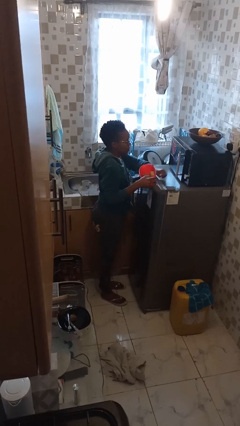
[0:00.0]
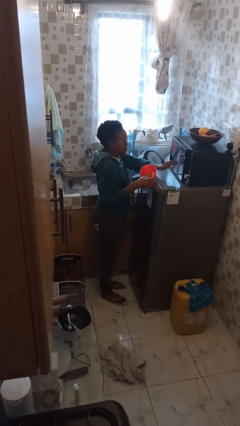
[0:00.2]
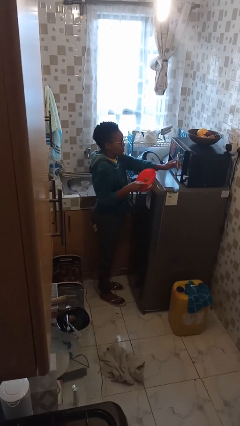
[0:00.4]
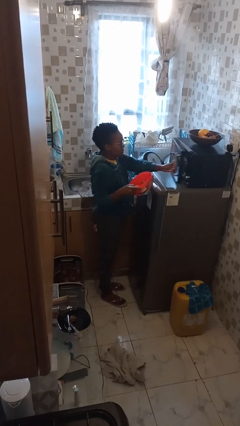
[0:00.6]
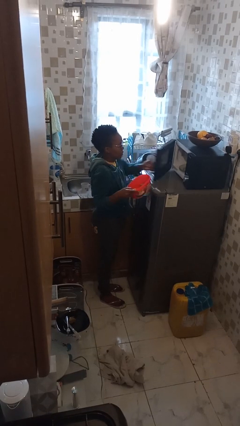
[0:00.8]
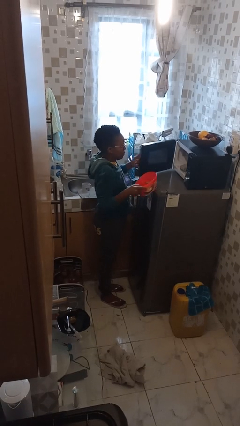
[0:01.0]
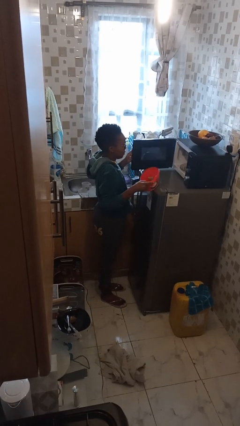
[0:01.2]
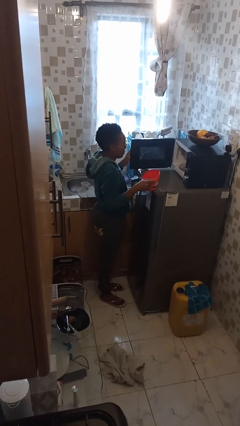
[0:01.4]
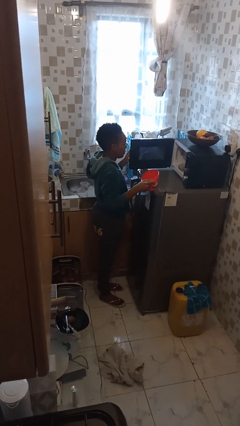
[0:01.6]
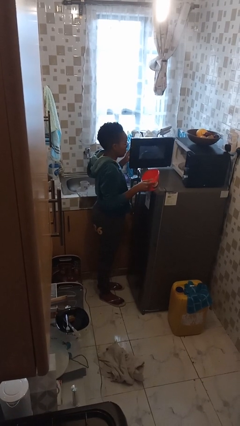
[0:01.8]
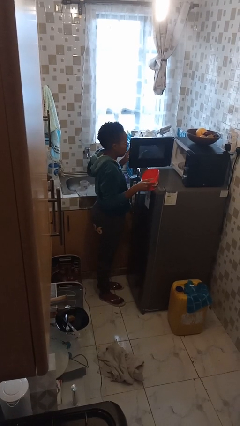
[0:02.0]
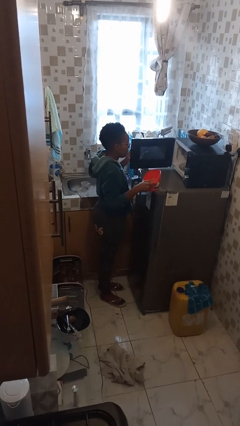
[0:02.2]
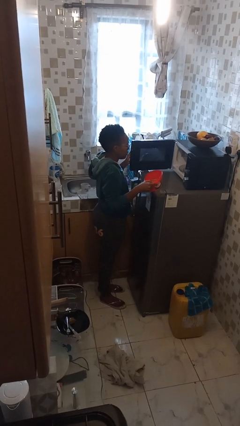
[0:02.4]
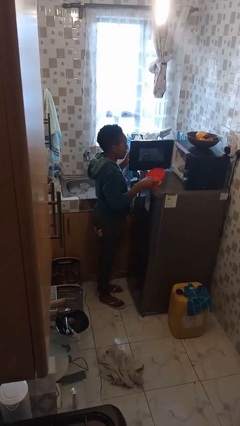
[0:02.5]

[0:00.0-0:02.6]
person opens microwave

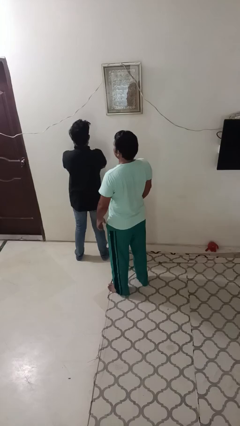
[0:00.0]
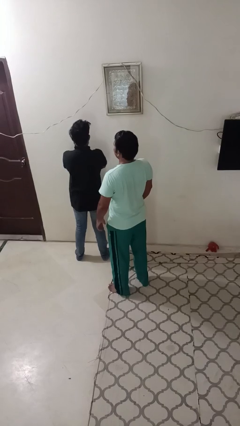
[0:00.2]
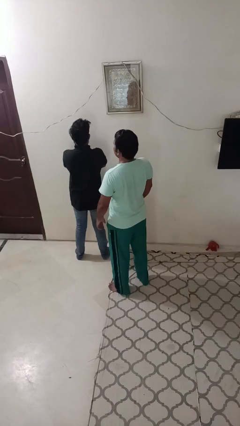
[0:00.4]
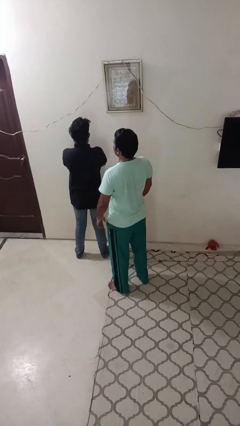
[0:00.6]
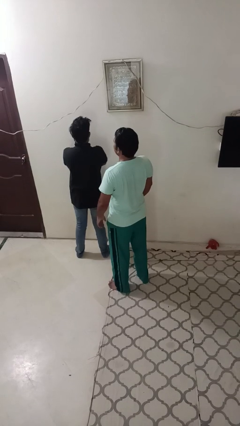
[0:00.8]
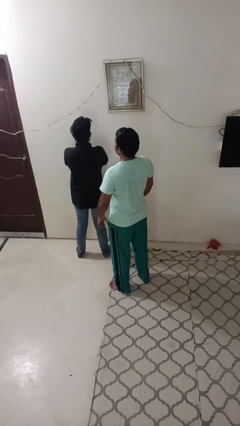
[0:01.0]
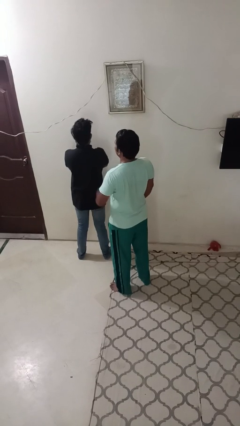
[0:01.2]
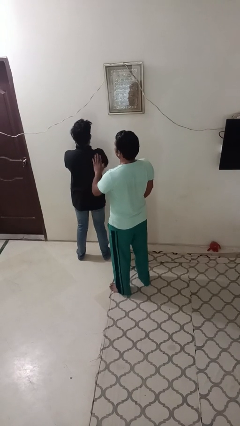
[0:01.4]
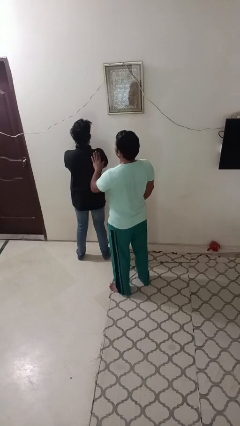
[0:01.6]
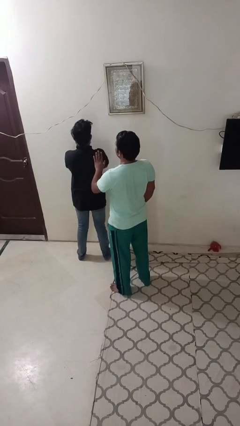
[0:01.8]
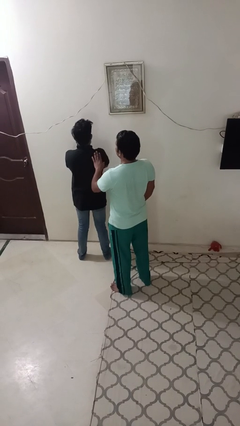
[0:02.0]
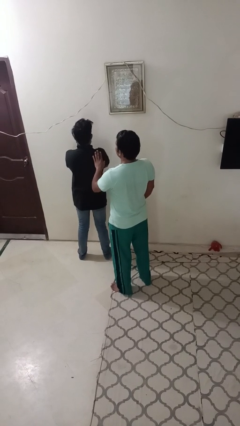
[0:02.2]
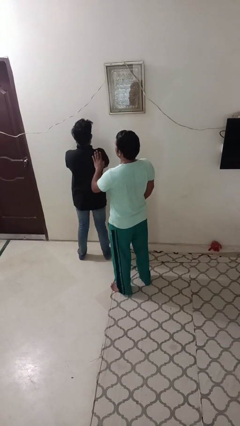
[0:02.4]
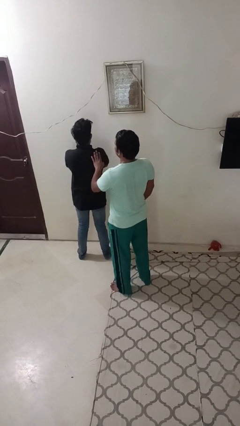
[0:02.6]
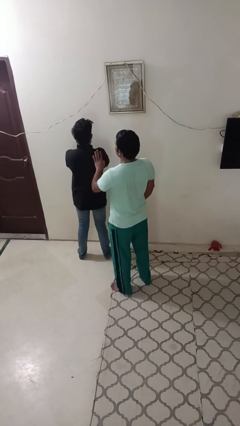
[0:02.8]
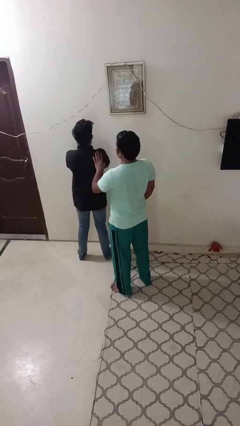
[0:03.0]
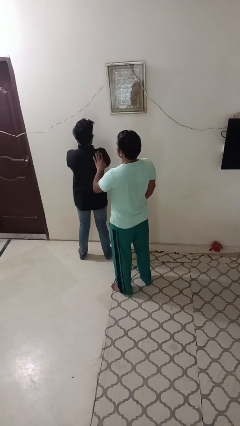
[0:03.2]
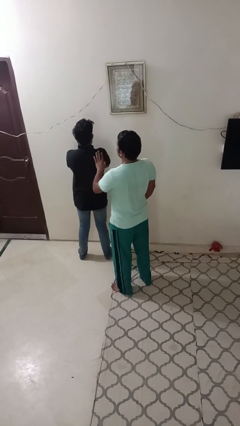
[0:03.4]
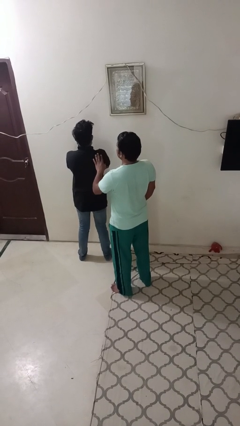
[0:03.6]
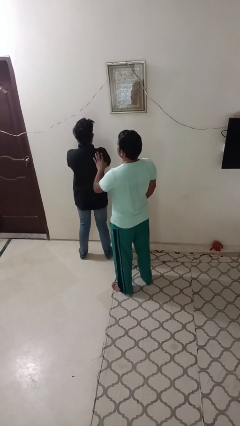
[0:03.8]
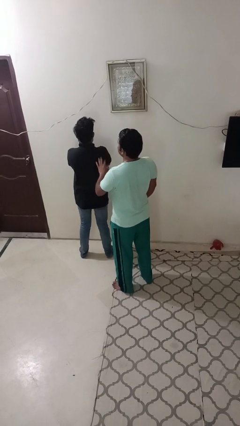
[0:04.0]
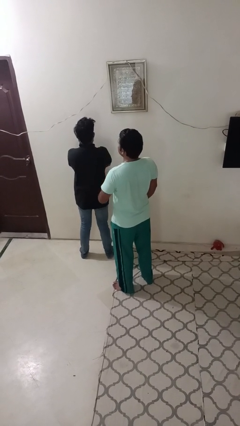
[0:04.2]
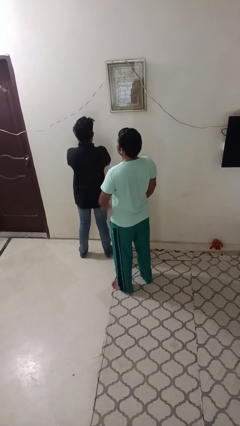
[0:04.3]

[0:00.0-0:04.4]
person touches back of person

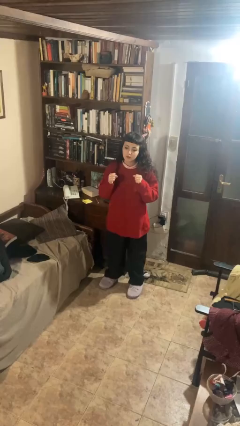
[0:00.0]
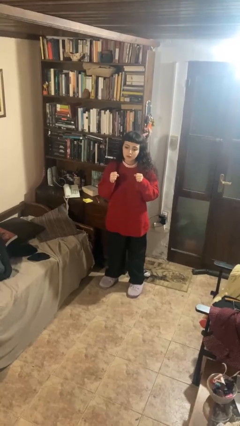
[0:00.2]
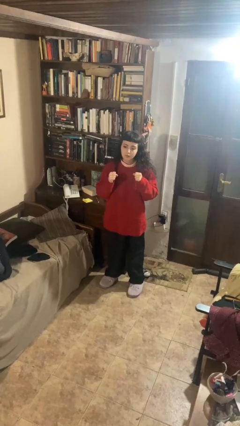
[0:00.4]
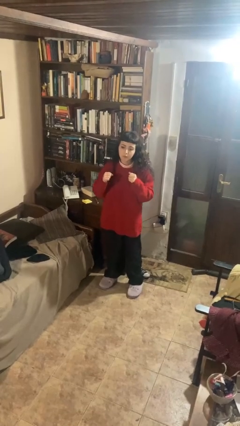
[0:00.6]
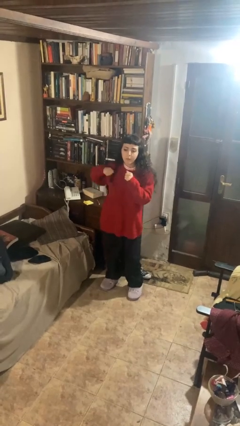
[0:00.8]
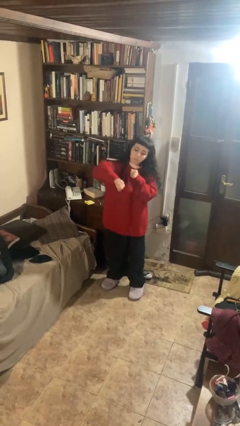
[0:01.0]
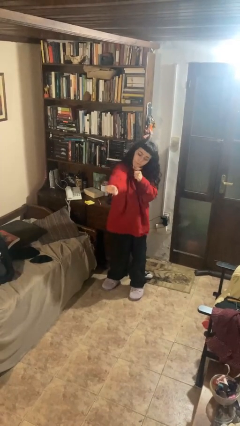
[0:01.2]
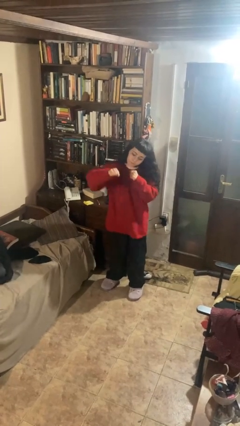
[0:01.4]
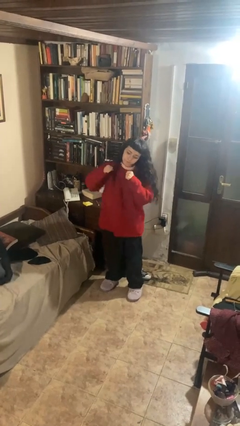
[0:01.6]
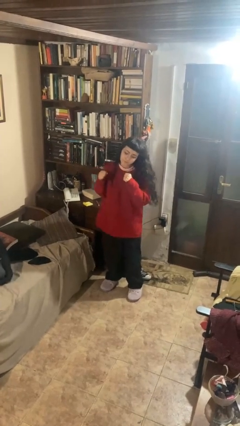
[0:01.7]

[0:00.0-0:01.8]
person punches

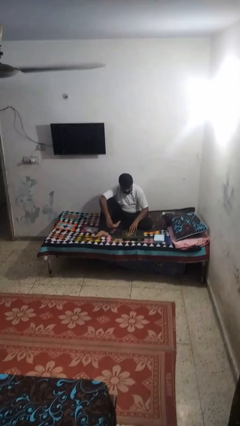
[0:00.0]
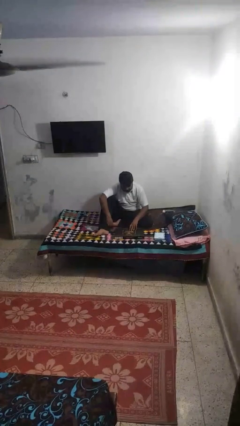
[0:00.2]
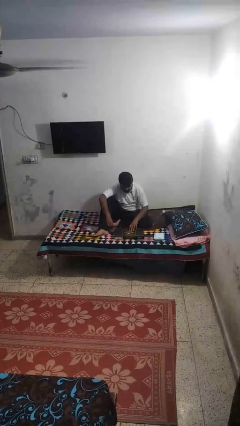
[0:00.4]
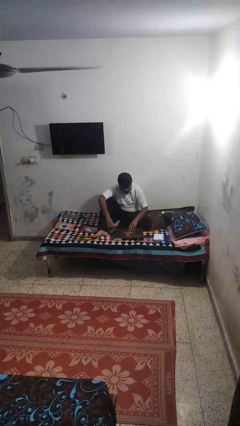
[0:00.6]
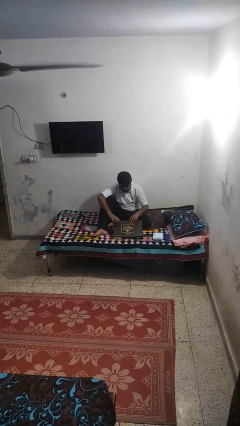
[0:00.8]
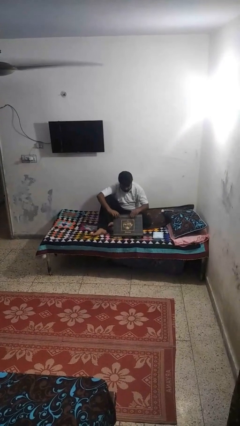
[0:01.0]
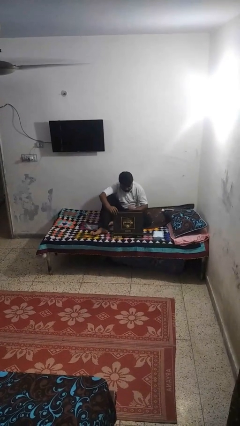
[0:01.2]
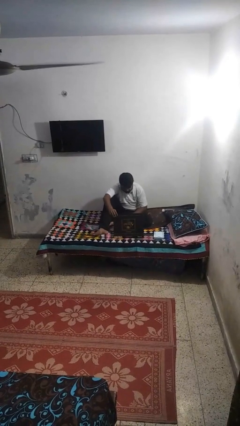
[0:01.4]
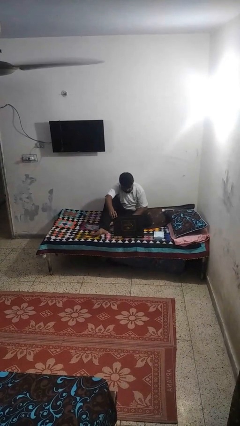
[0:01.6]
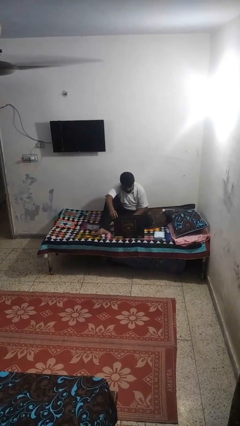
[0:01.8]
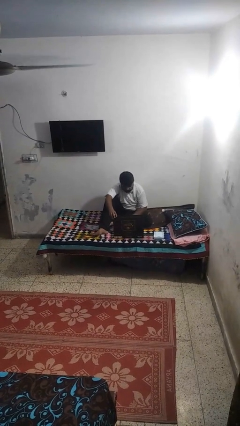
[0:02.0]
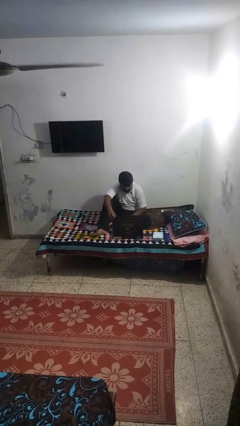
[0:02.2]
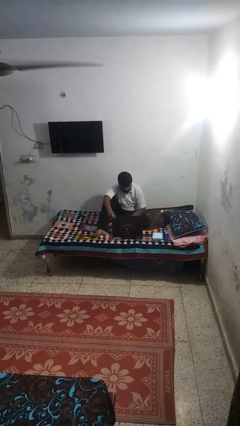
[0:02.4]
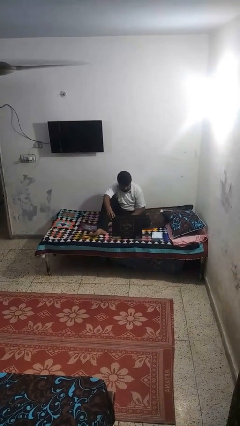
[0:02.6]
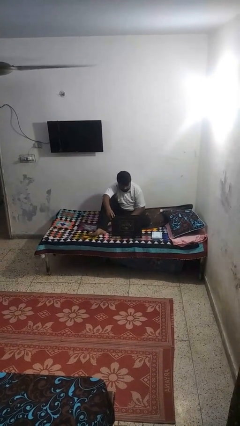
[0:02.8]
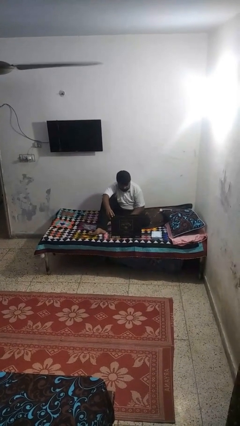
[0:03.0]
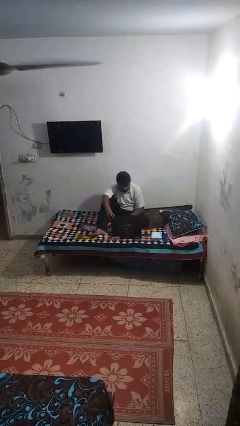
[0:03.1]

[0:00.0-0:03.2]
person opens laptop

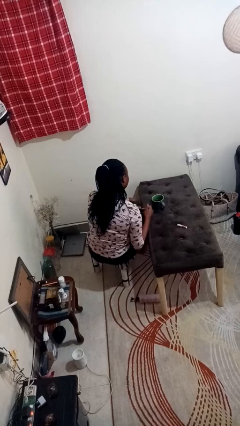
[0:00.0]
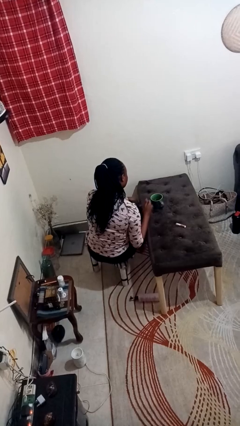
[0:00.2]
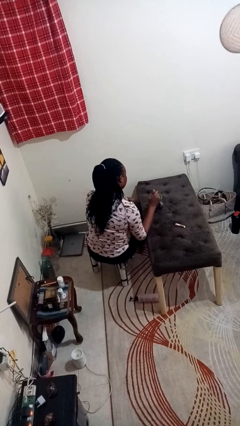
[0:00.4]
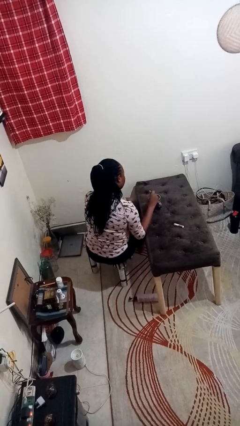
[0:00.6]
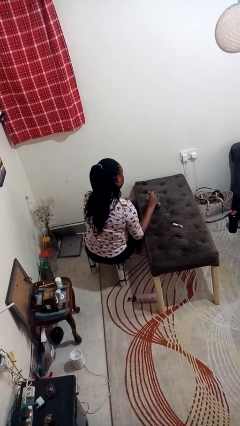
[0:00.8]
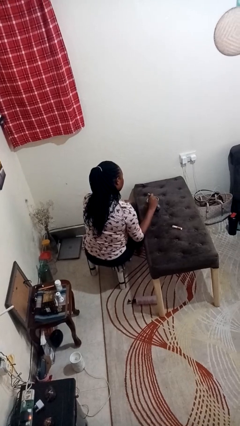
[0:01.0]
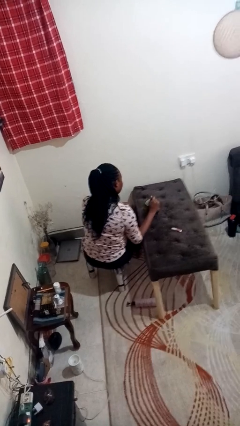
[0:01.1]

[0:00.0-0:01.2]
person stirs mug

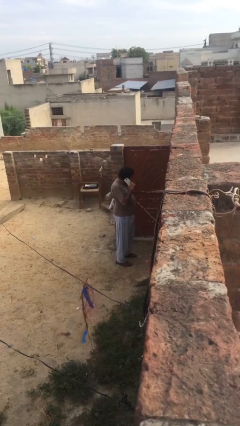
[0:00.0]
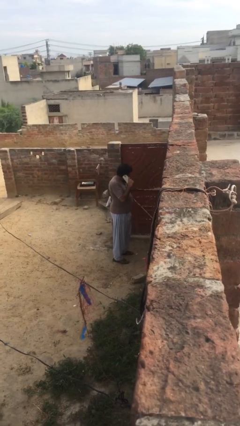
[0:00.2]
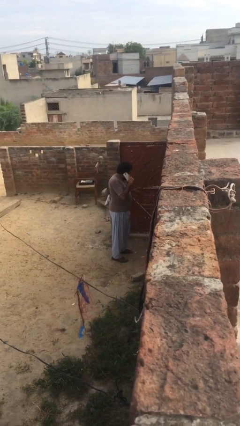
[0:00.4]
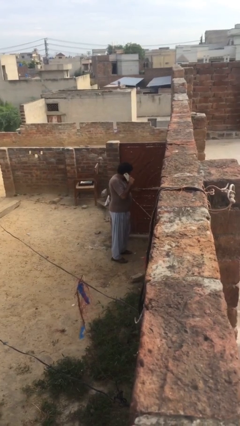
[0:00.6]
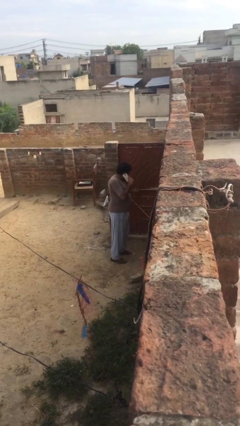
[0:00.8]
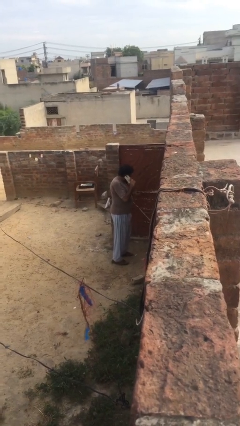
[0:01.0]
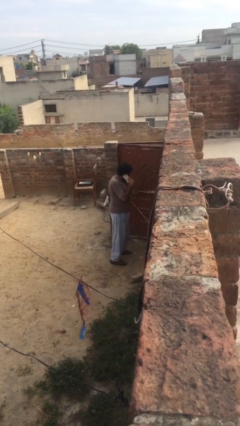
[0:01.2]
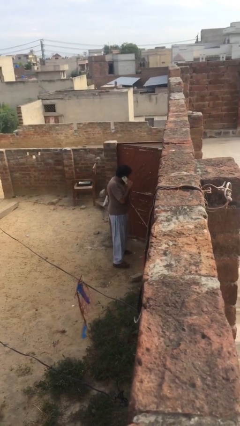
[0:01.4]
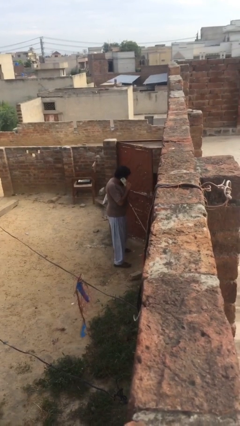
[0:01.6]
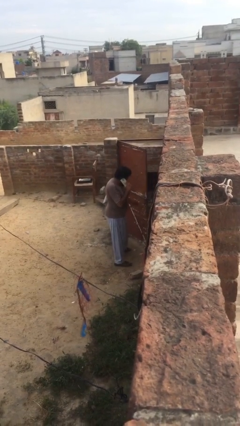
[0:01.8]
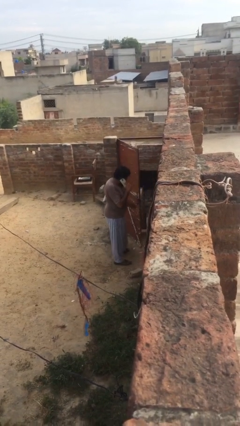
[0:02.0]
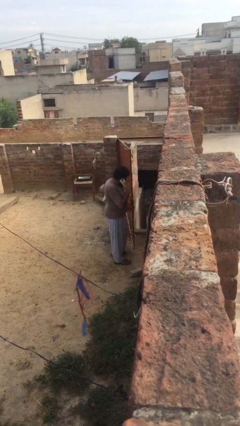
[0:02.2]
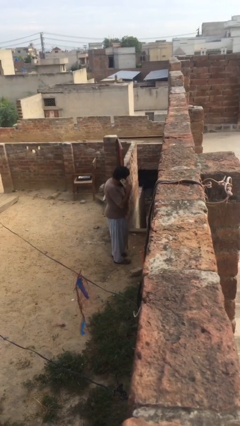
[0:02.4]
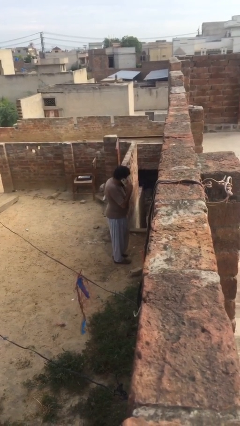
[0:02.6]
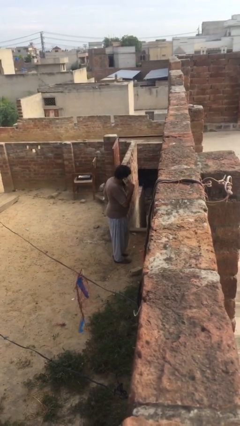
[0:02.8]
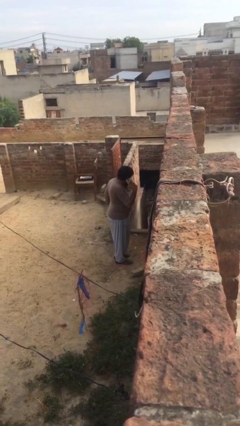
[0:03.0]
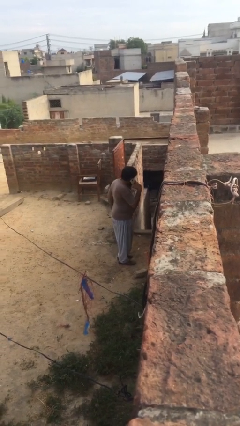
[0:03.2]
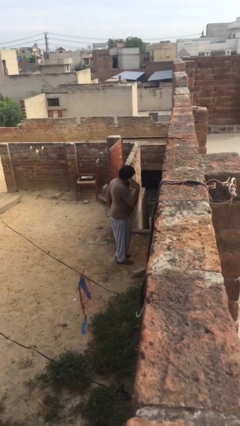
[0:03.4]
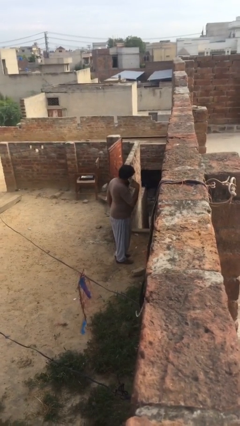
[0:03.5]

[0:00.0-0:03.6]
person opens facility door

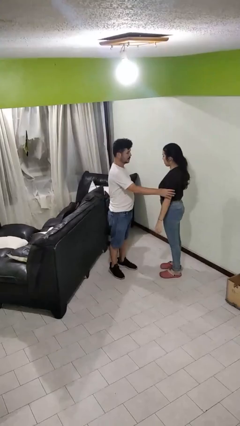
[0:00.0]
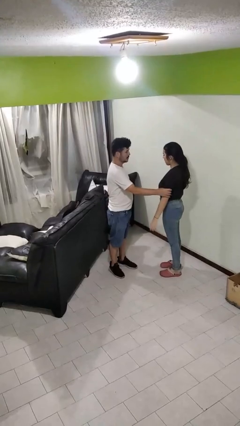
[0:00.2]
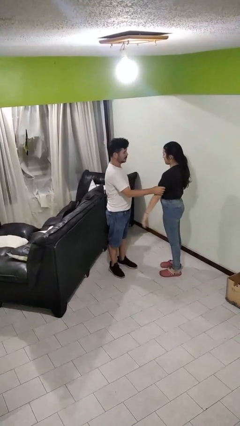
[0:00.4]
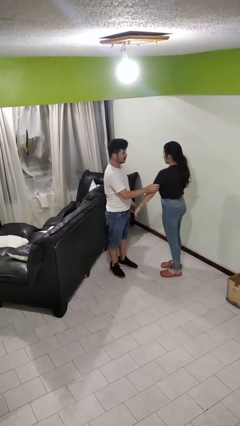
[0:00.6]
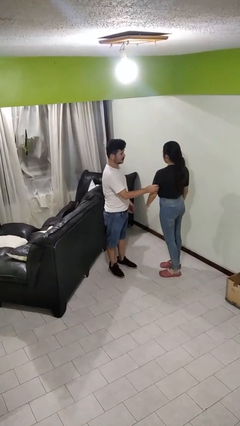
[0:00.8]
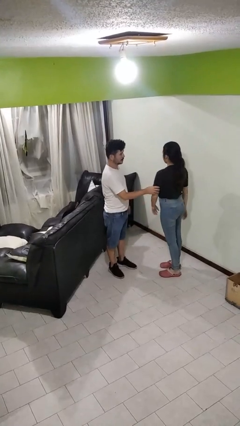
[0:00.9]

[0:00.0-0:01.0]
person grabs person by bicep
